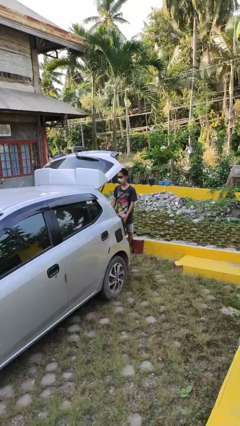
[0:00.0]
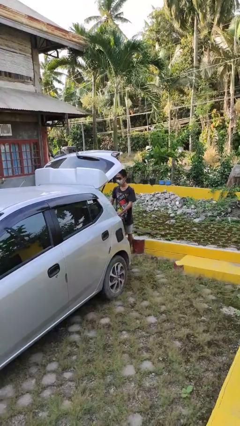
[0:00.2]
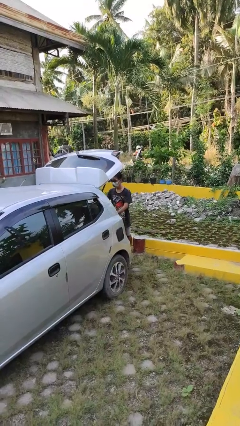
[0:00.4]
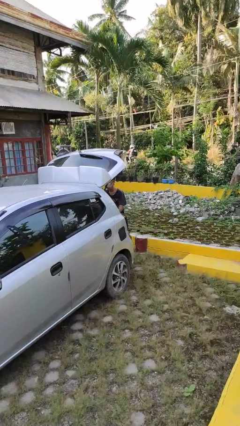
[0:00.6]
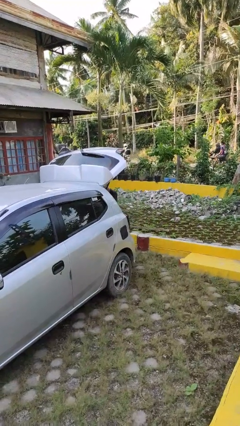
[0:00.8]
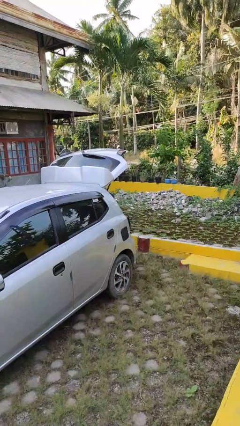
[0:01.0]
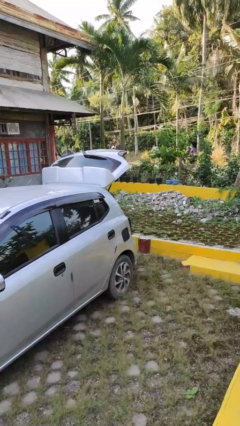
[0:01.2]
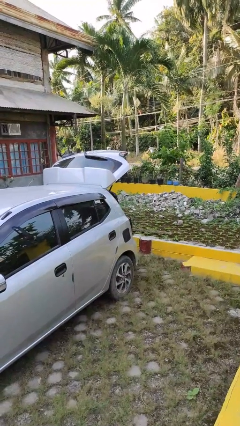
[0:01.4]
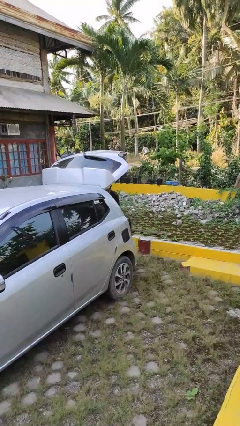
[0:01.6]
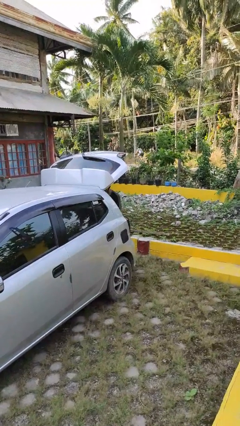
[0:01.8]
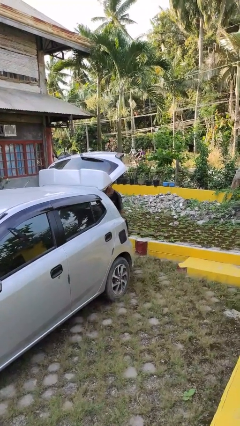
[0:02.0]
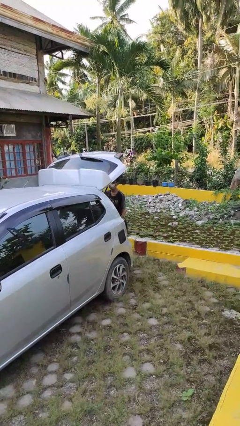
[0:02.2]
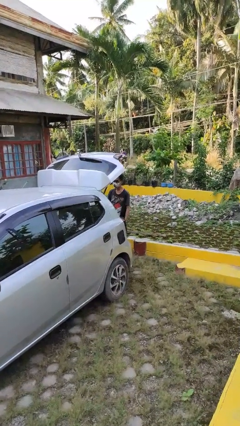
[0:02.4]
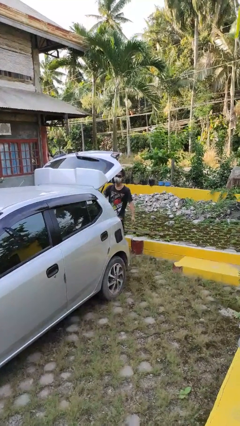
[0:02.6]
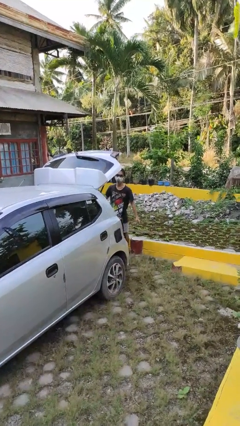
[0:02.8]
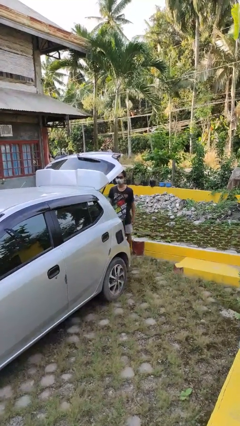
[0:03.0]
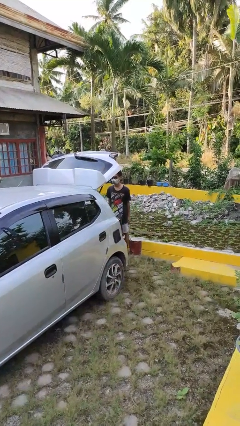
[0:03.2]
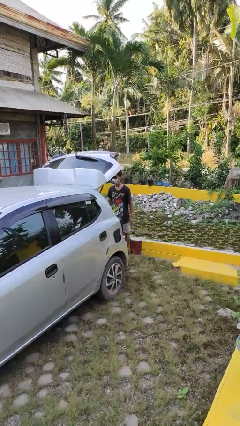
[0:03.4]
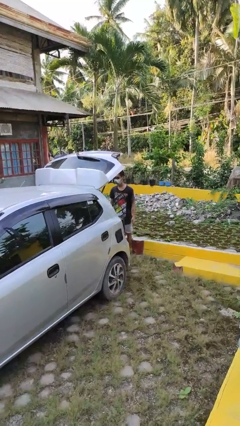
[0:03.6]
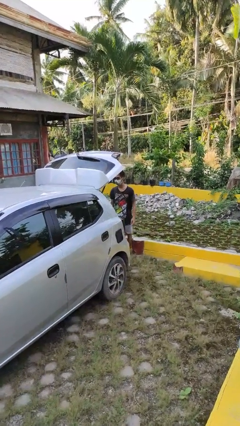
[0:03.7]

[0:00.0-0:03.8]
person loads car

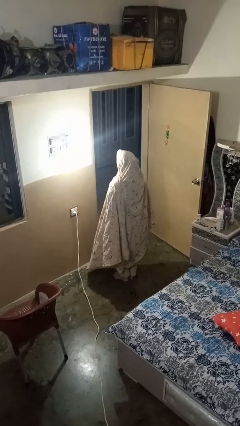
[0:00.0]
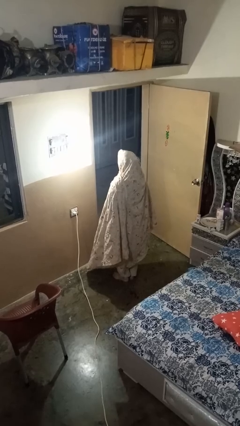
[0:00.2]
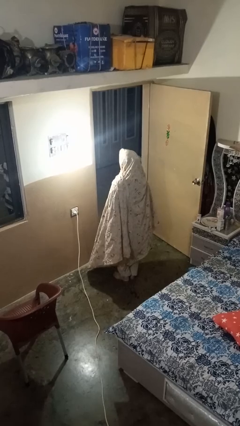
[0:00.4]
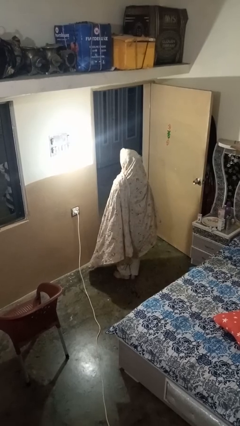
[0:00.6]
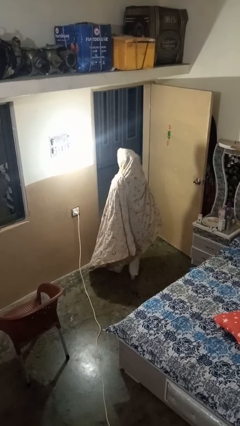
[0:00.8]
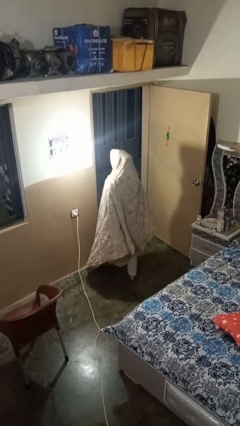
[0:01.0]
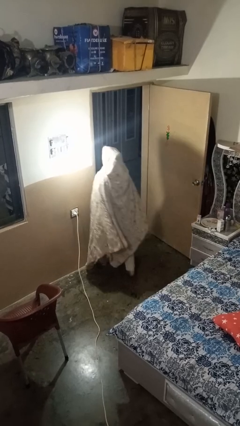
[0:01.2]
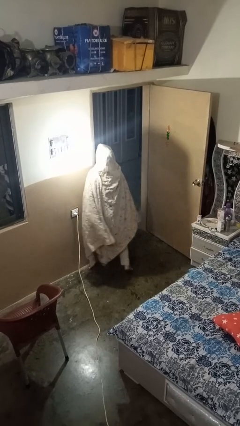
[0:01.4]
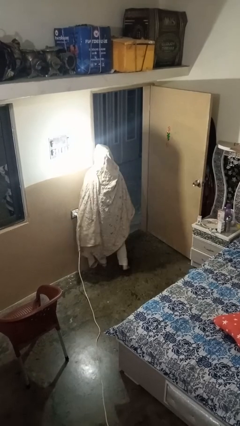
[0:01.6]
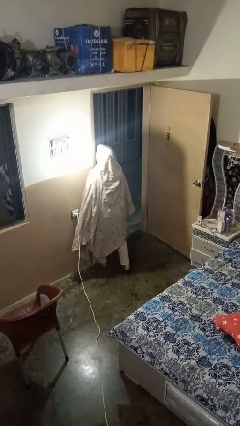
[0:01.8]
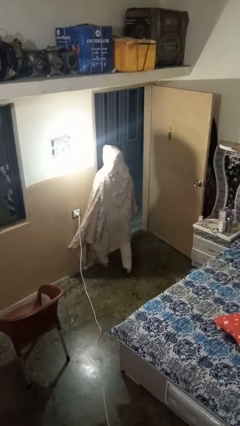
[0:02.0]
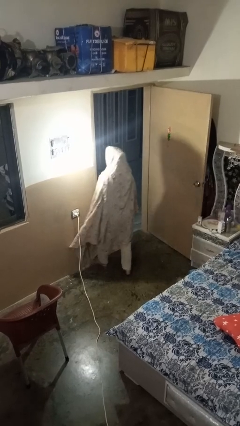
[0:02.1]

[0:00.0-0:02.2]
person bumps into wall

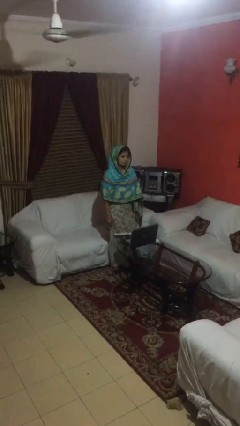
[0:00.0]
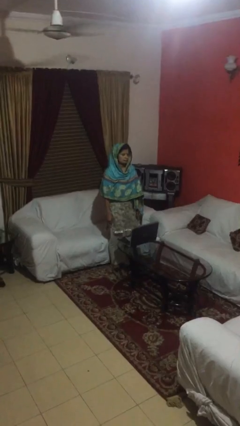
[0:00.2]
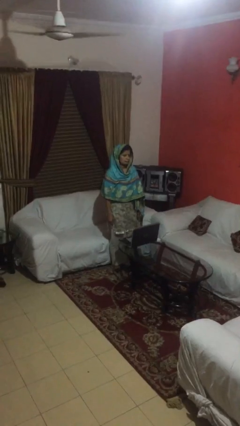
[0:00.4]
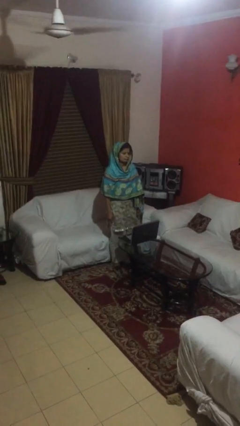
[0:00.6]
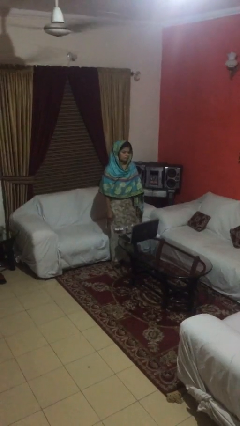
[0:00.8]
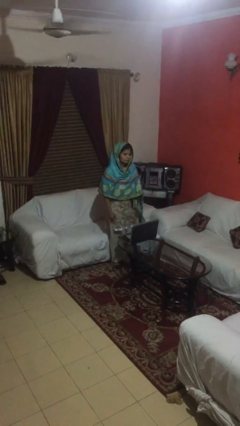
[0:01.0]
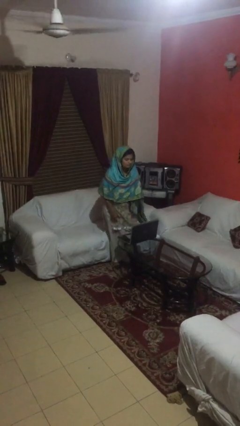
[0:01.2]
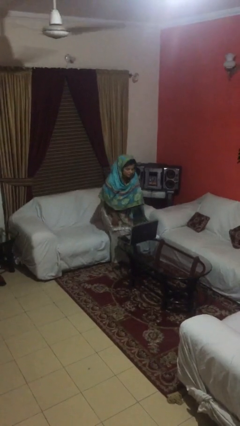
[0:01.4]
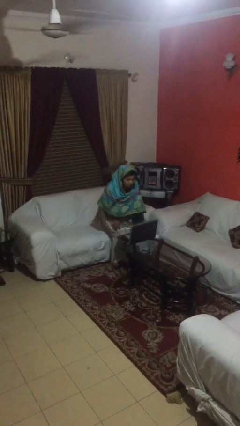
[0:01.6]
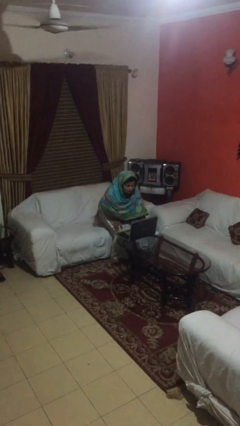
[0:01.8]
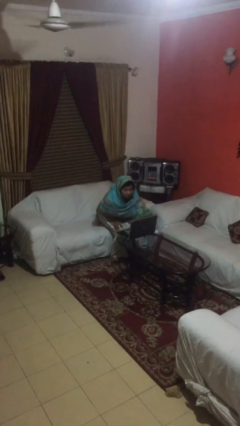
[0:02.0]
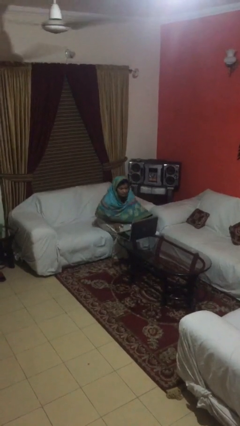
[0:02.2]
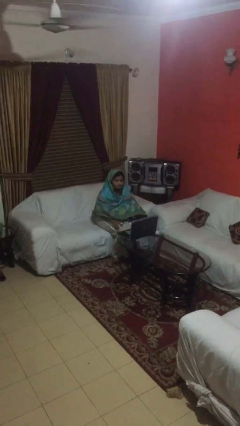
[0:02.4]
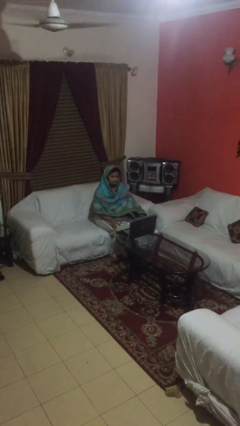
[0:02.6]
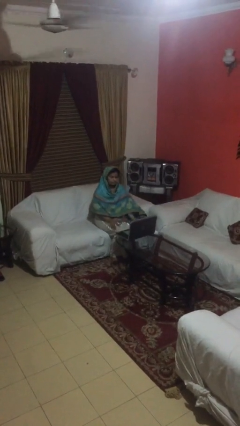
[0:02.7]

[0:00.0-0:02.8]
person sits down

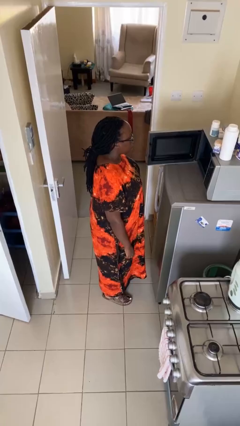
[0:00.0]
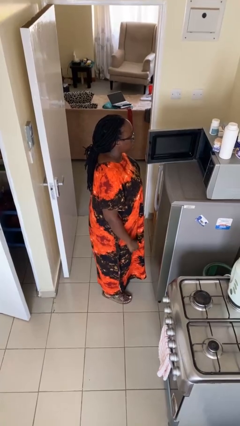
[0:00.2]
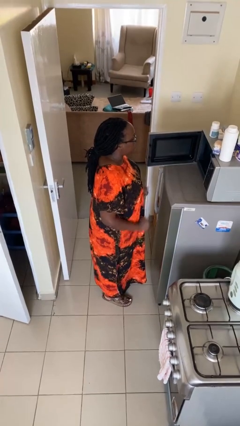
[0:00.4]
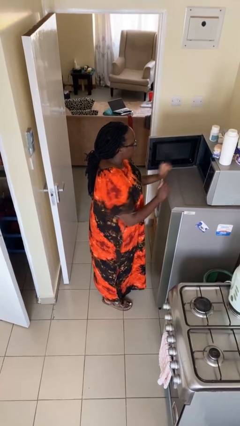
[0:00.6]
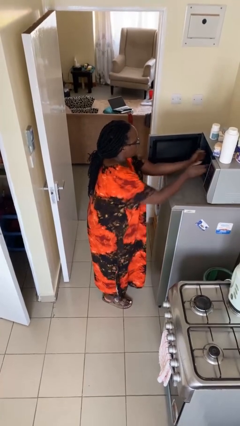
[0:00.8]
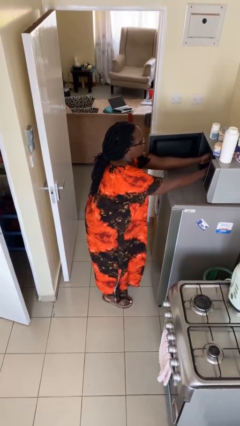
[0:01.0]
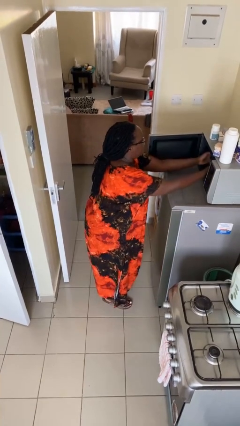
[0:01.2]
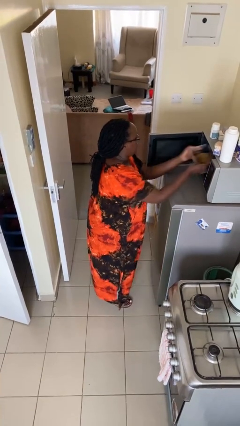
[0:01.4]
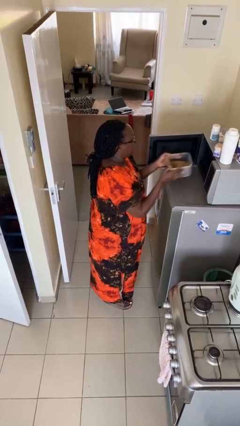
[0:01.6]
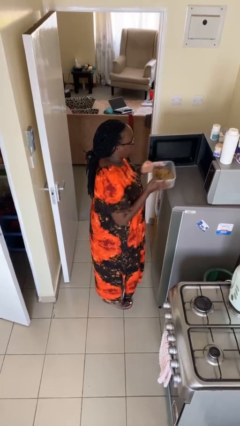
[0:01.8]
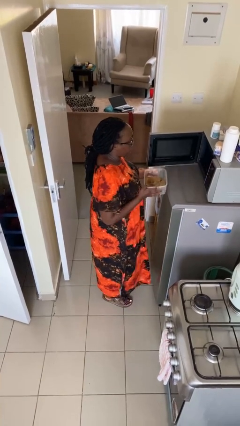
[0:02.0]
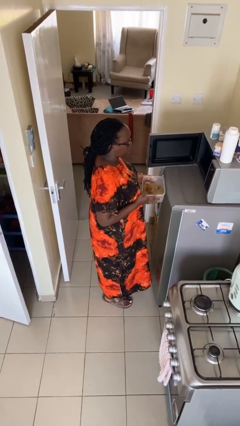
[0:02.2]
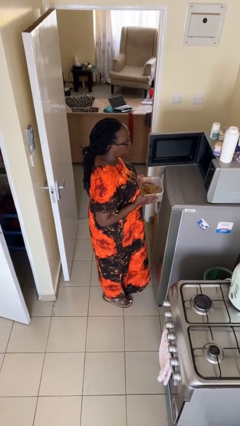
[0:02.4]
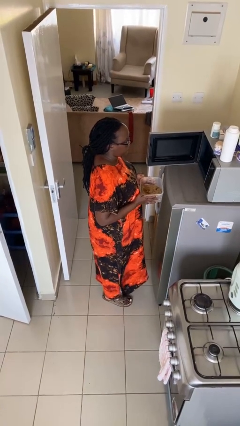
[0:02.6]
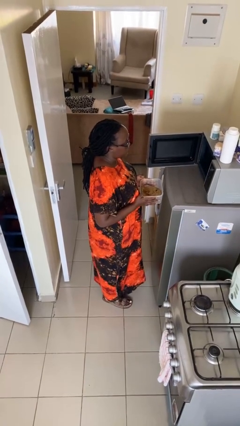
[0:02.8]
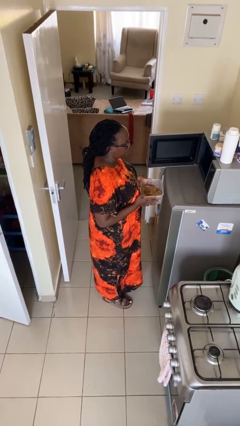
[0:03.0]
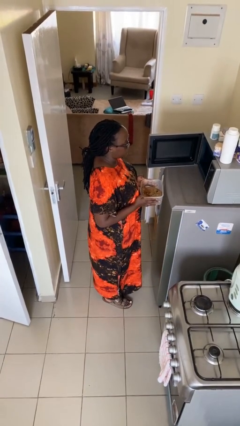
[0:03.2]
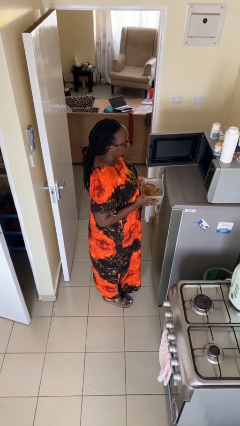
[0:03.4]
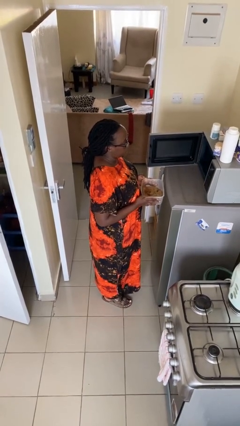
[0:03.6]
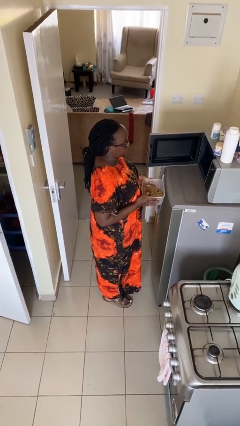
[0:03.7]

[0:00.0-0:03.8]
person takes object from microwave

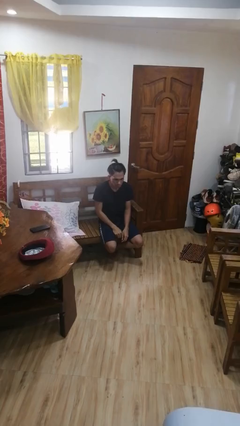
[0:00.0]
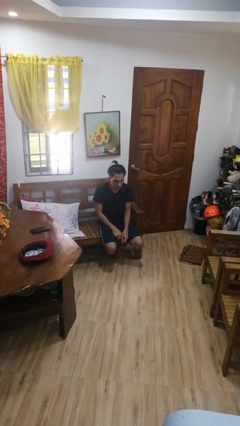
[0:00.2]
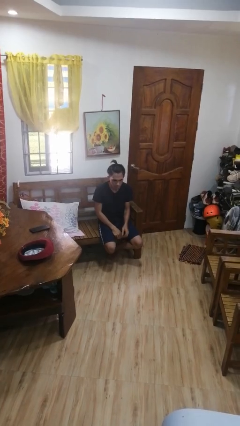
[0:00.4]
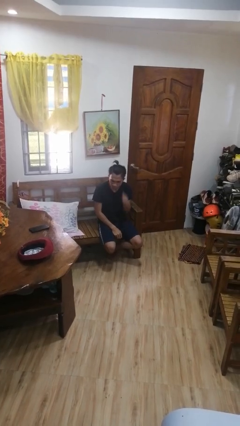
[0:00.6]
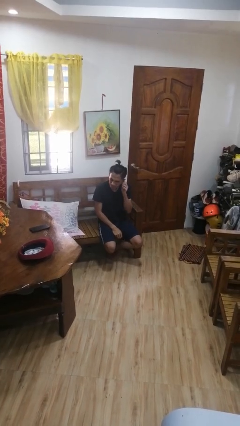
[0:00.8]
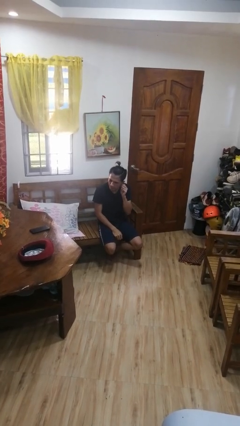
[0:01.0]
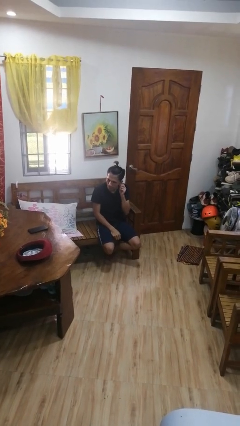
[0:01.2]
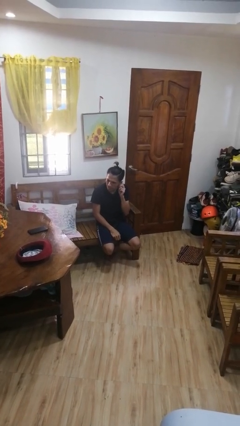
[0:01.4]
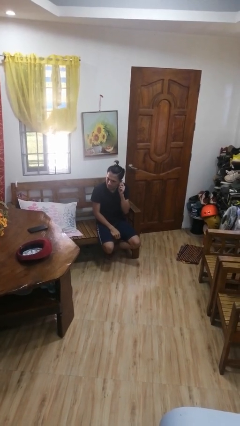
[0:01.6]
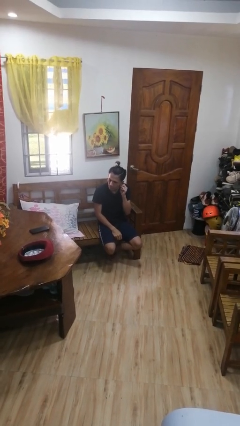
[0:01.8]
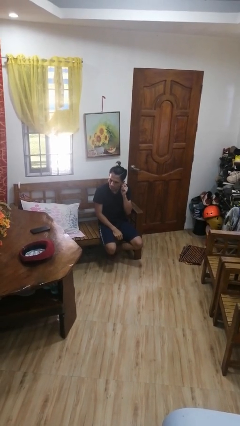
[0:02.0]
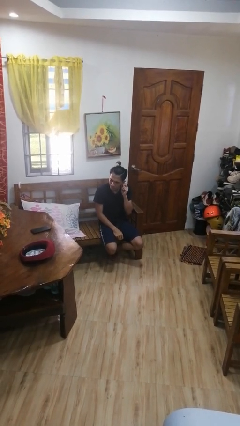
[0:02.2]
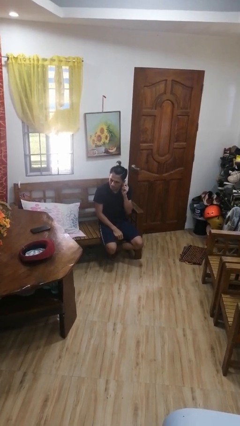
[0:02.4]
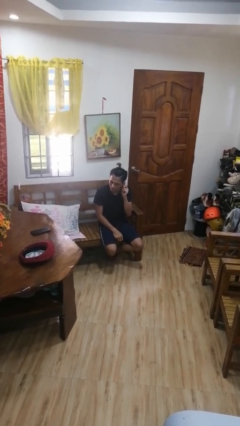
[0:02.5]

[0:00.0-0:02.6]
person touches earlobe

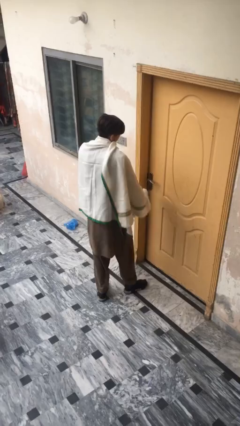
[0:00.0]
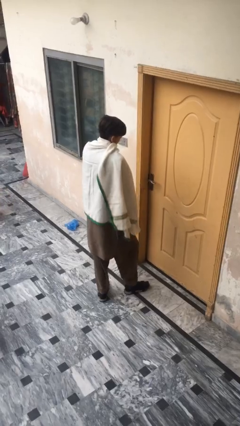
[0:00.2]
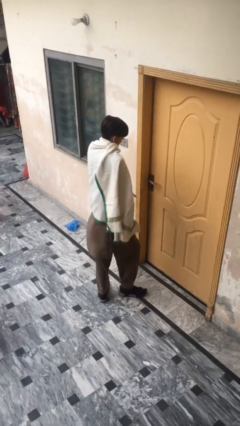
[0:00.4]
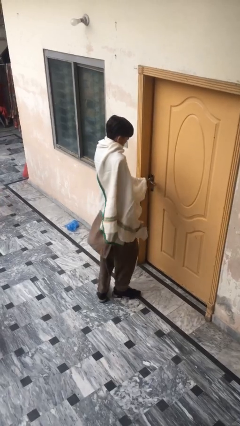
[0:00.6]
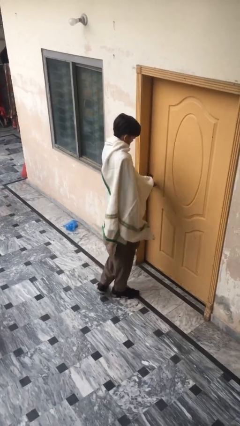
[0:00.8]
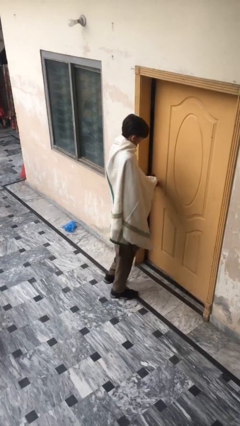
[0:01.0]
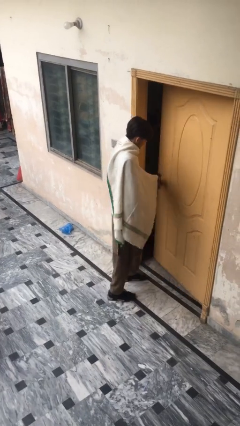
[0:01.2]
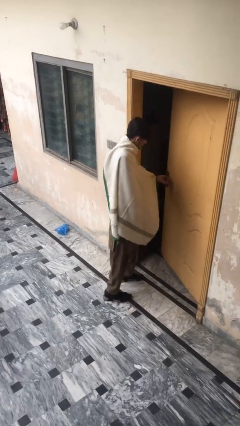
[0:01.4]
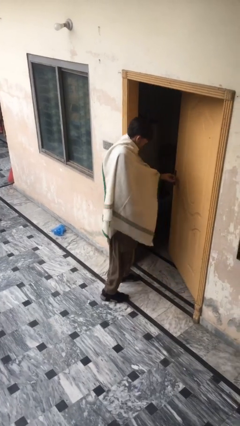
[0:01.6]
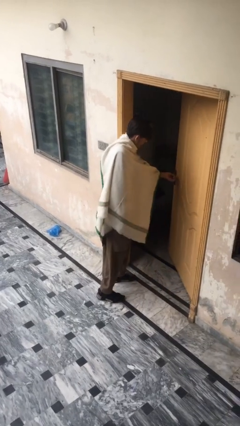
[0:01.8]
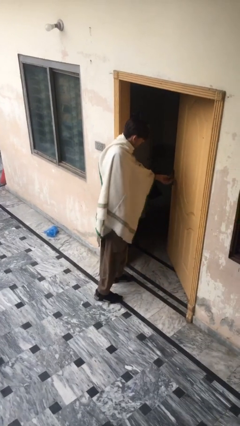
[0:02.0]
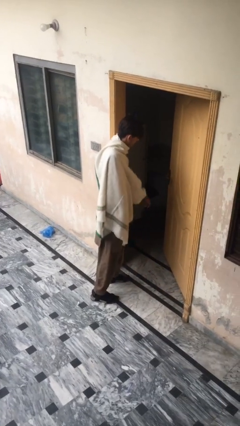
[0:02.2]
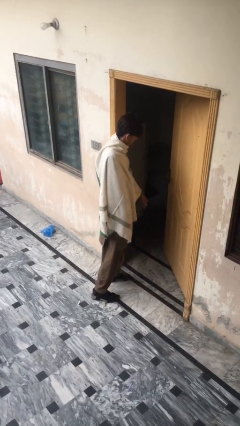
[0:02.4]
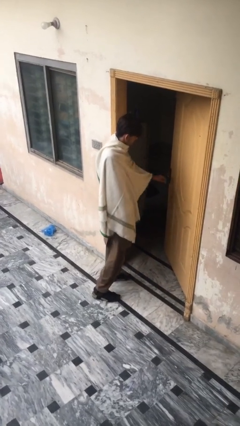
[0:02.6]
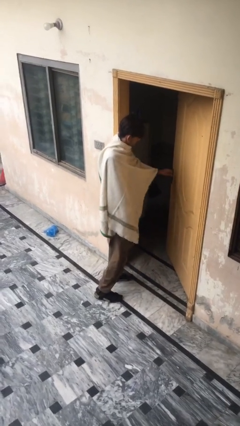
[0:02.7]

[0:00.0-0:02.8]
person opens facility door
